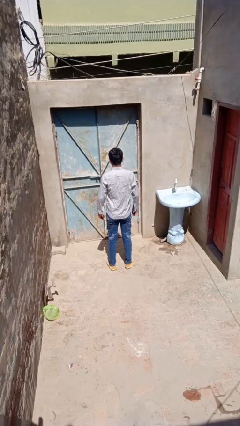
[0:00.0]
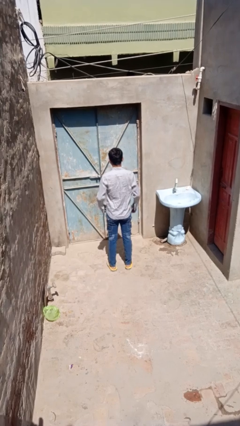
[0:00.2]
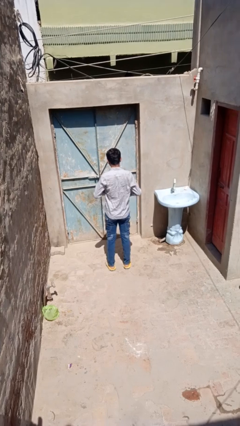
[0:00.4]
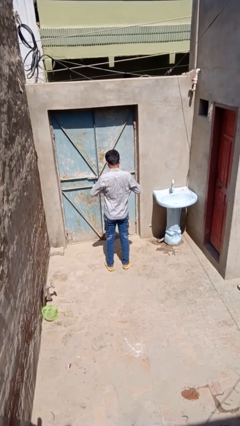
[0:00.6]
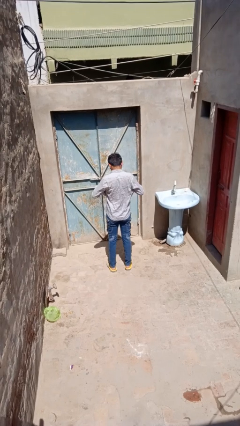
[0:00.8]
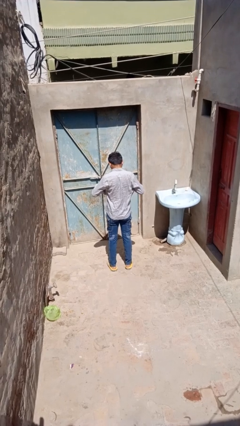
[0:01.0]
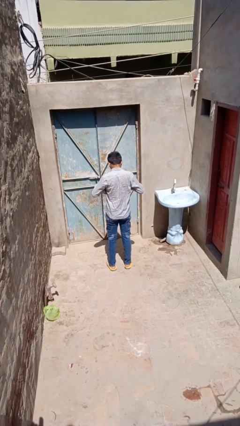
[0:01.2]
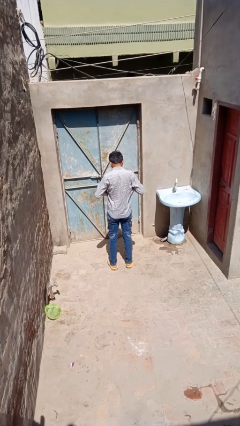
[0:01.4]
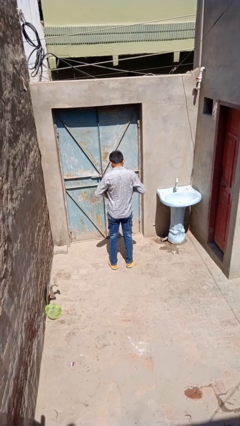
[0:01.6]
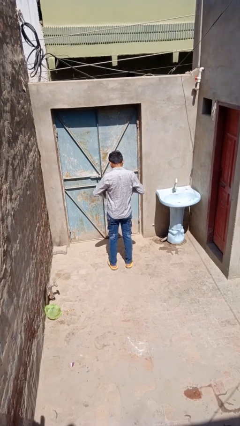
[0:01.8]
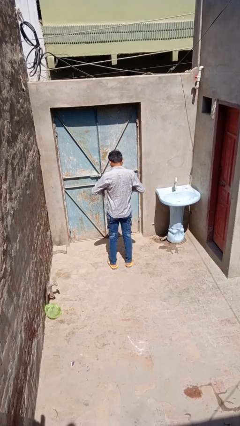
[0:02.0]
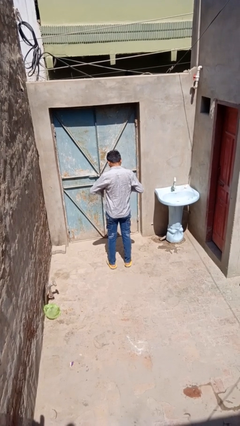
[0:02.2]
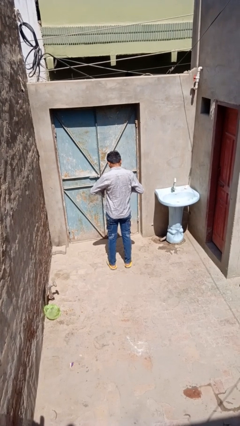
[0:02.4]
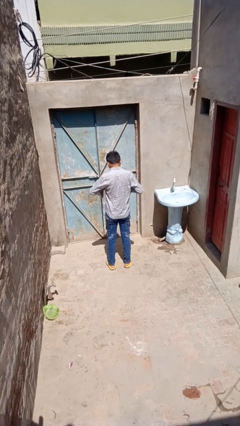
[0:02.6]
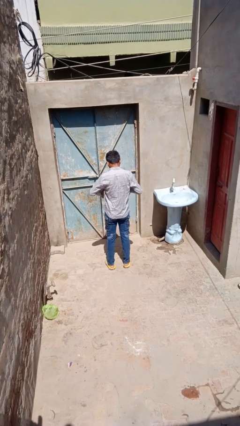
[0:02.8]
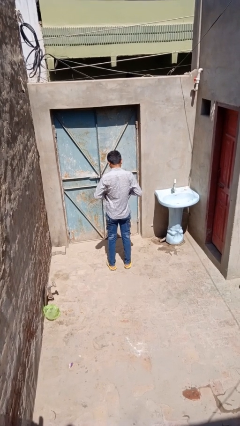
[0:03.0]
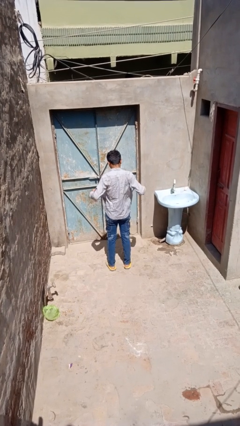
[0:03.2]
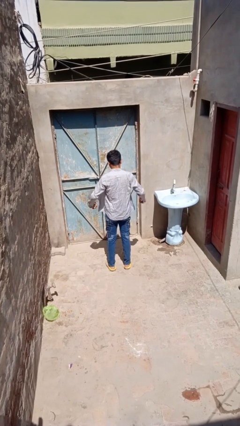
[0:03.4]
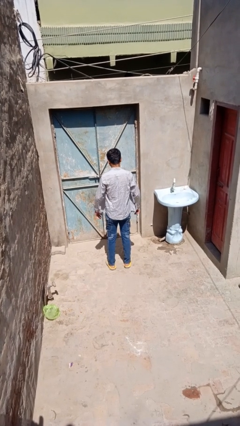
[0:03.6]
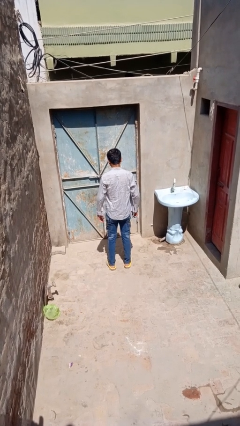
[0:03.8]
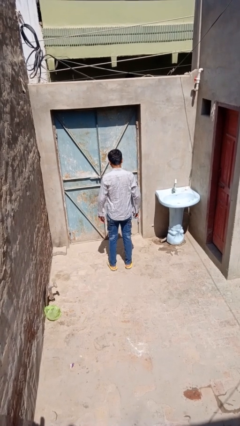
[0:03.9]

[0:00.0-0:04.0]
person unbuttons shirt

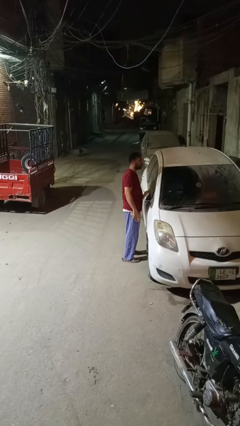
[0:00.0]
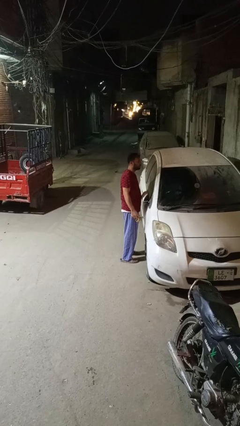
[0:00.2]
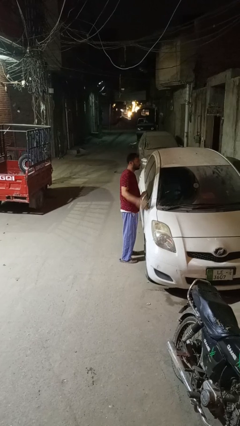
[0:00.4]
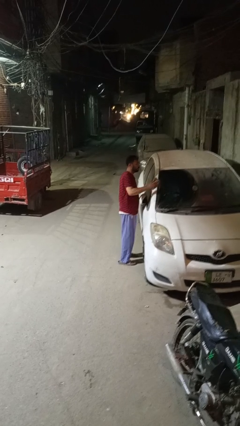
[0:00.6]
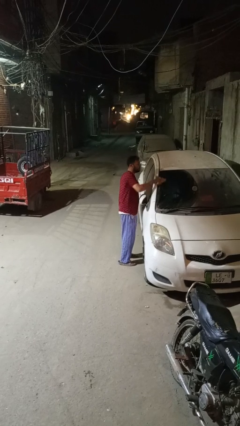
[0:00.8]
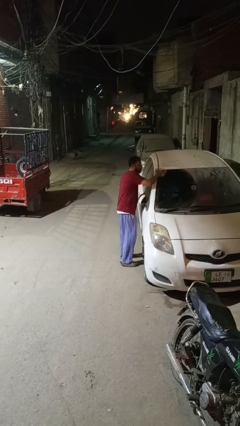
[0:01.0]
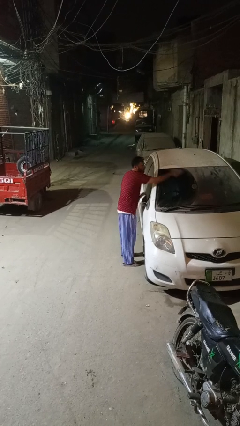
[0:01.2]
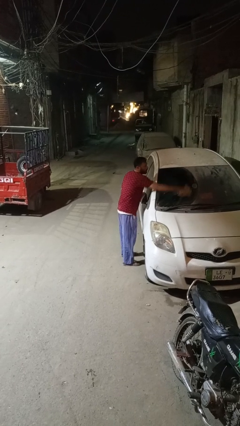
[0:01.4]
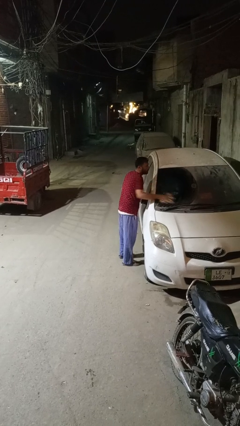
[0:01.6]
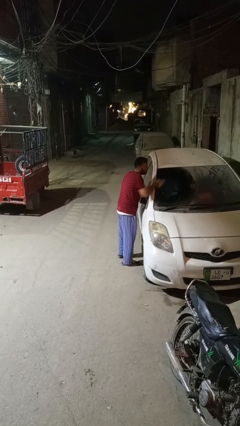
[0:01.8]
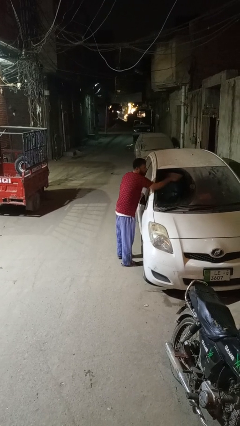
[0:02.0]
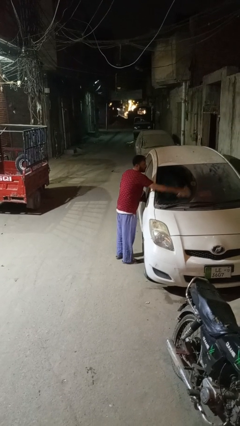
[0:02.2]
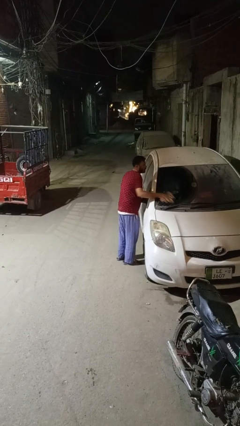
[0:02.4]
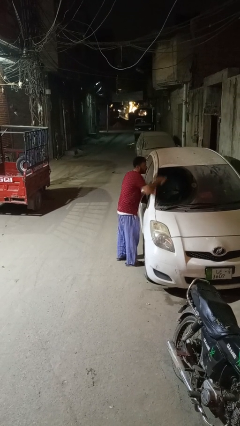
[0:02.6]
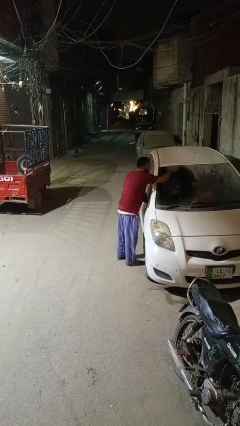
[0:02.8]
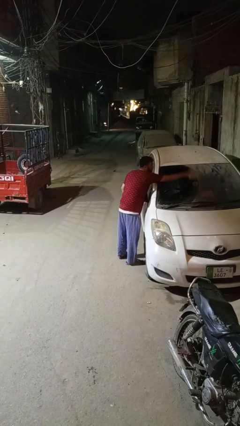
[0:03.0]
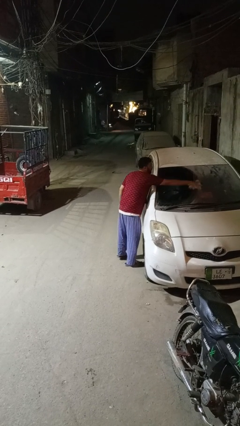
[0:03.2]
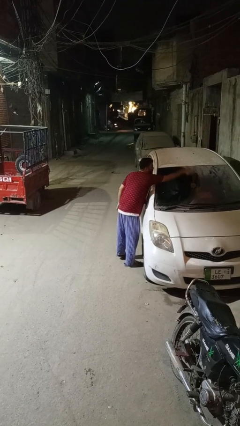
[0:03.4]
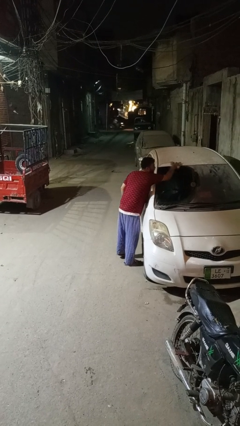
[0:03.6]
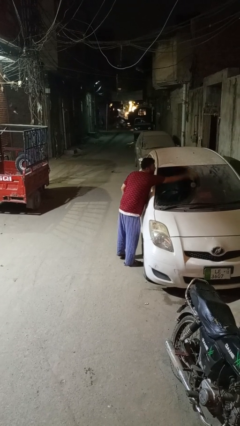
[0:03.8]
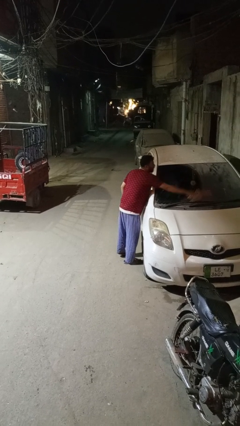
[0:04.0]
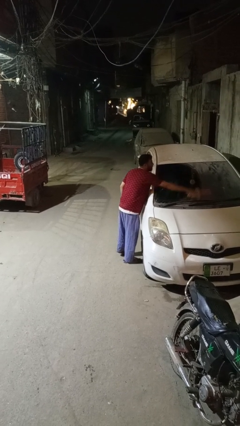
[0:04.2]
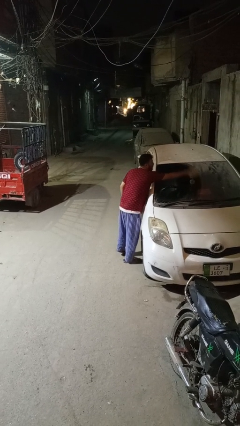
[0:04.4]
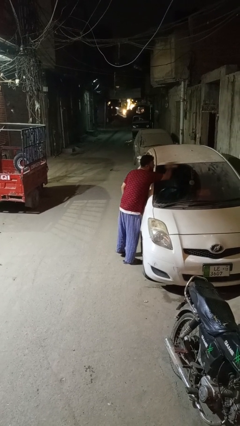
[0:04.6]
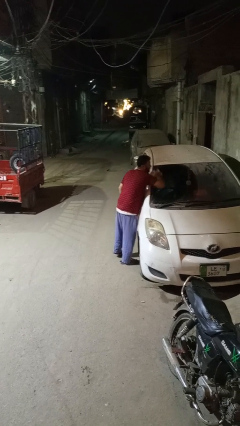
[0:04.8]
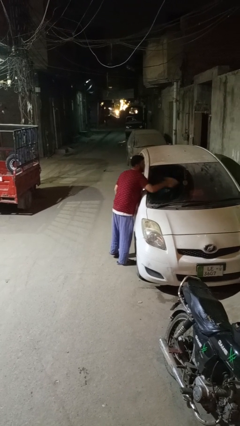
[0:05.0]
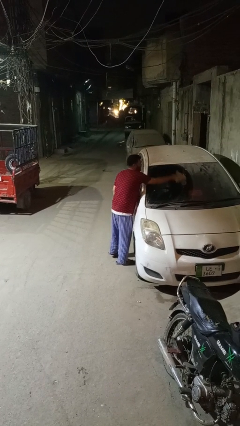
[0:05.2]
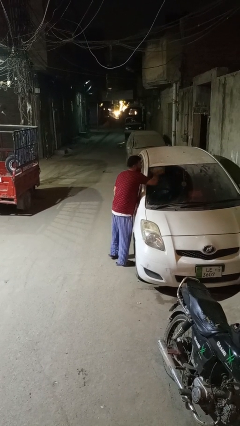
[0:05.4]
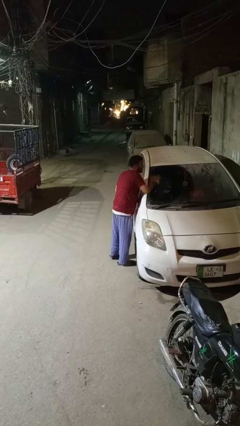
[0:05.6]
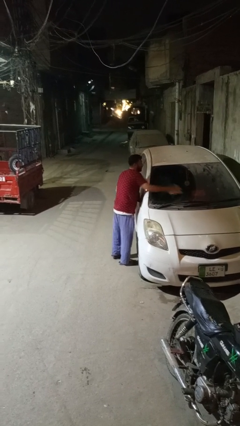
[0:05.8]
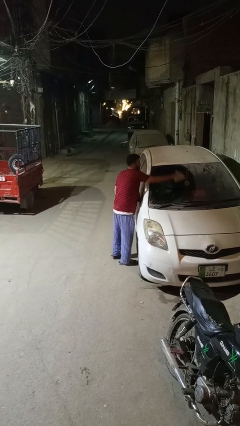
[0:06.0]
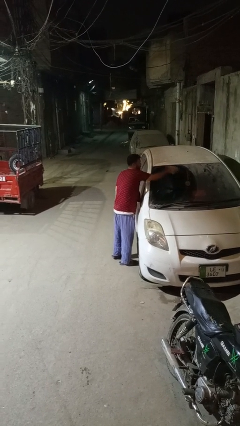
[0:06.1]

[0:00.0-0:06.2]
person polishes car with rag

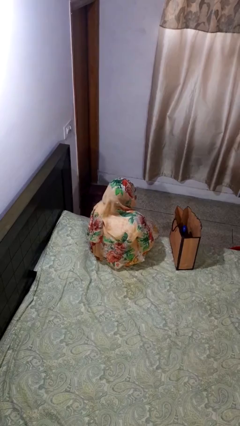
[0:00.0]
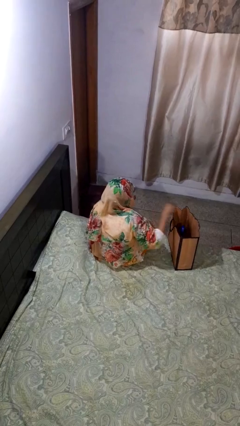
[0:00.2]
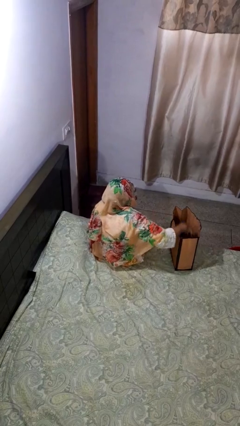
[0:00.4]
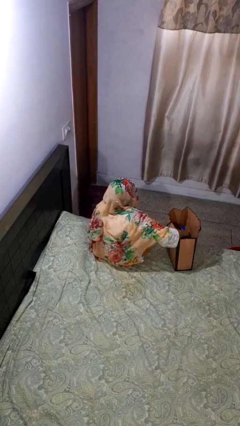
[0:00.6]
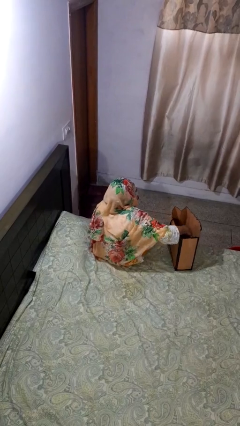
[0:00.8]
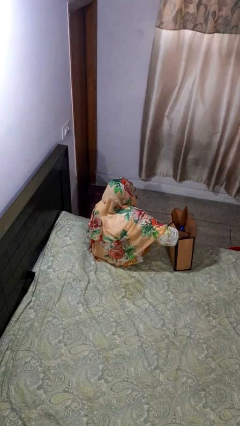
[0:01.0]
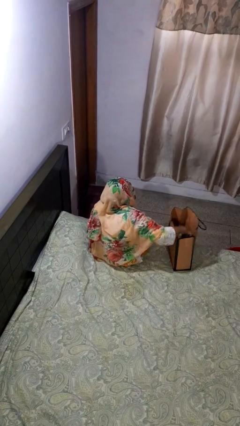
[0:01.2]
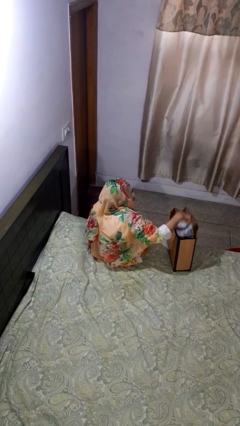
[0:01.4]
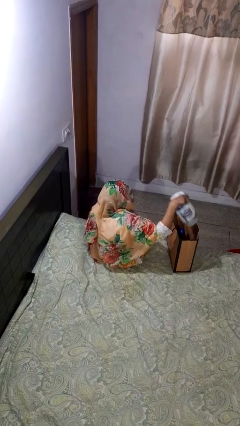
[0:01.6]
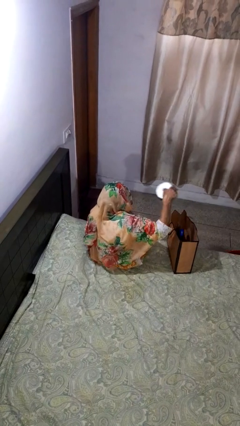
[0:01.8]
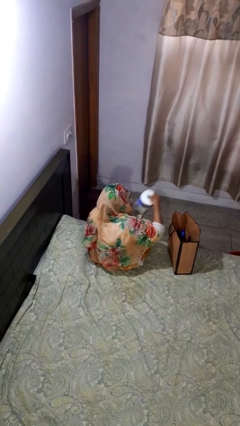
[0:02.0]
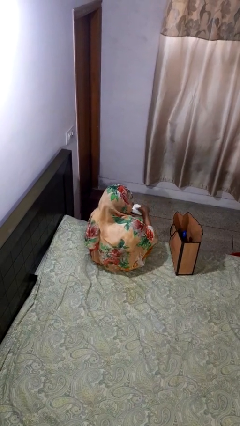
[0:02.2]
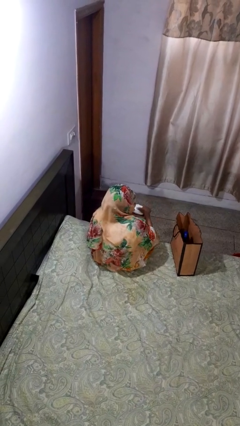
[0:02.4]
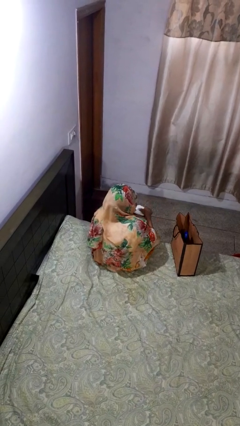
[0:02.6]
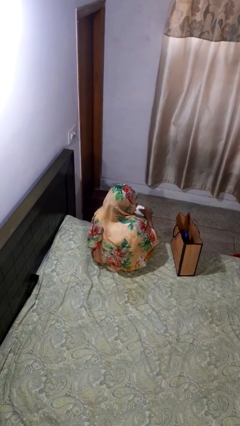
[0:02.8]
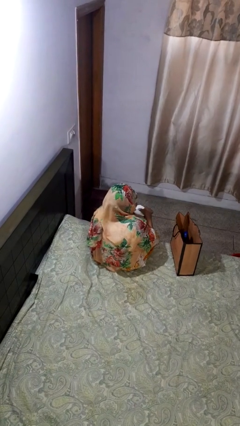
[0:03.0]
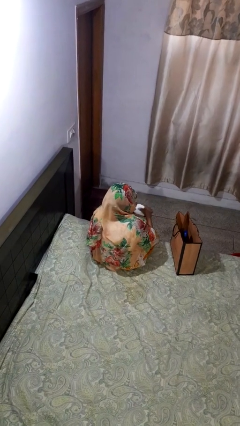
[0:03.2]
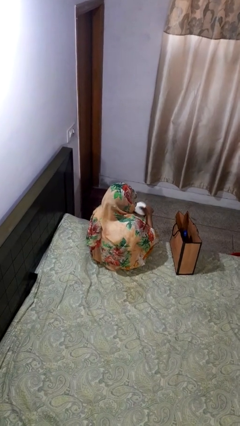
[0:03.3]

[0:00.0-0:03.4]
person takes object from bag

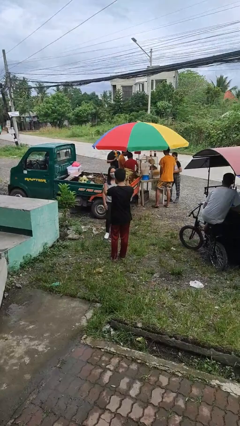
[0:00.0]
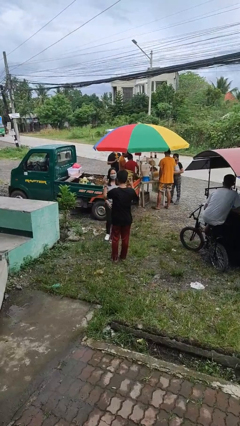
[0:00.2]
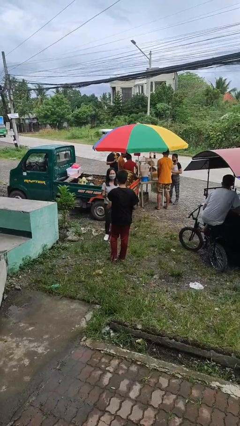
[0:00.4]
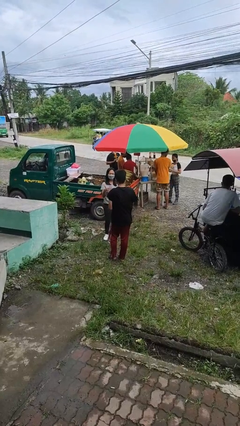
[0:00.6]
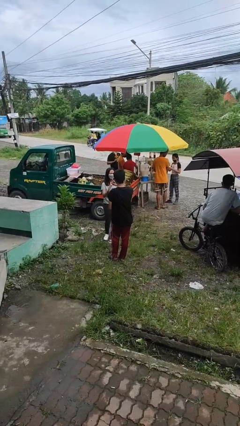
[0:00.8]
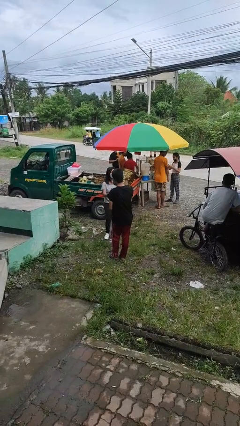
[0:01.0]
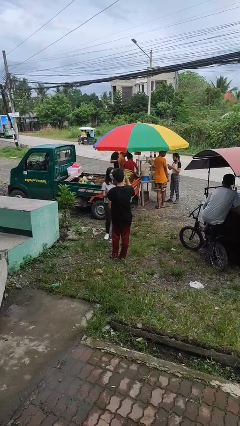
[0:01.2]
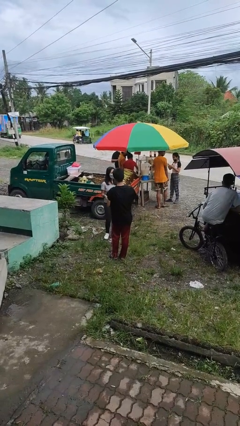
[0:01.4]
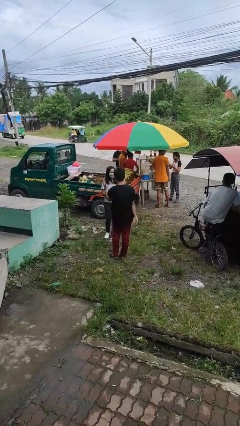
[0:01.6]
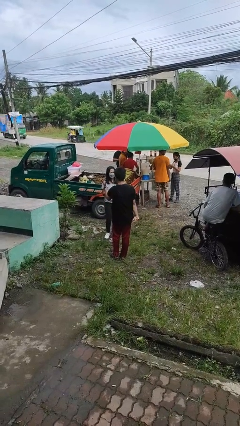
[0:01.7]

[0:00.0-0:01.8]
person talks to person

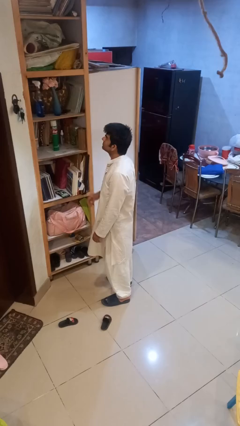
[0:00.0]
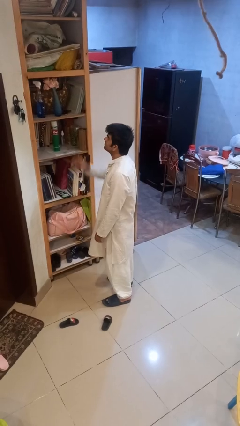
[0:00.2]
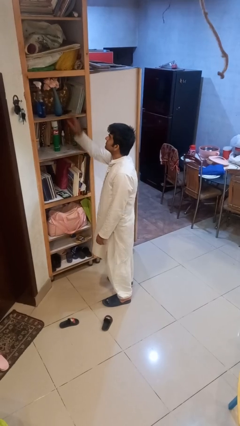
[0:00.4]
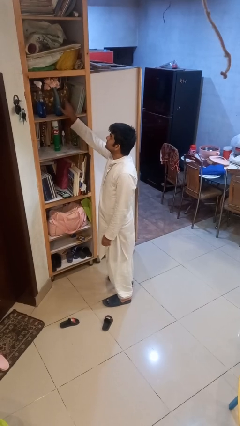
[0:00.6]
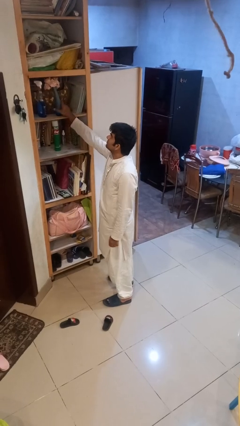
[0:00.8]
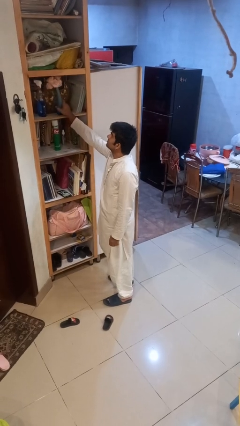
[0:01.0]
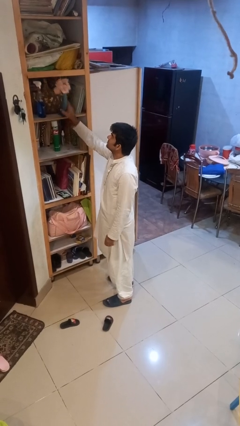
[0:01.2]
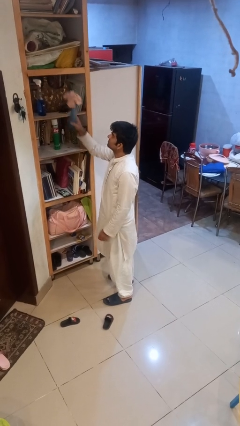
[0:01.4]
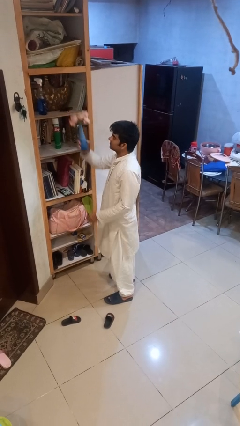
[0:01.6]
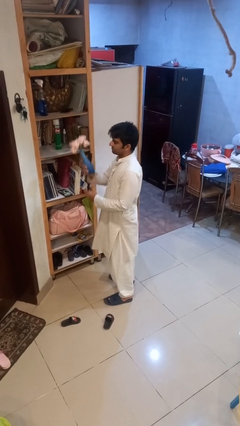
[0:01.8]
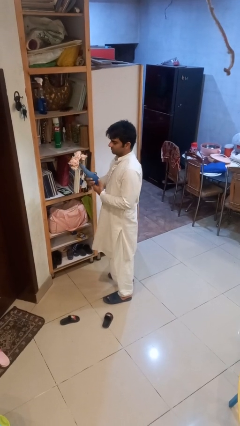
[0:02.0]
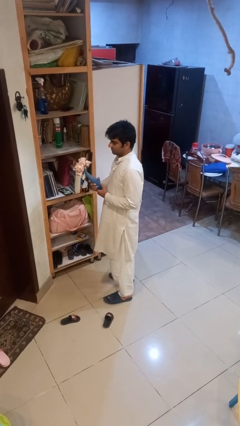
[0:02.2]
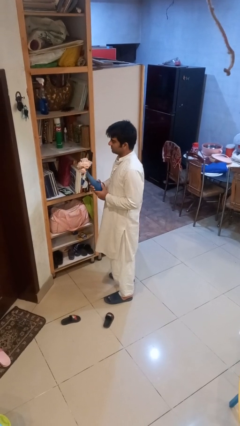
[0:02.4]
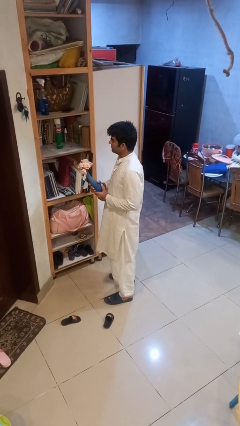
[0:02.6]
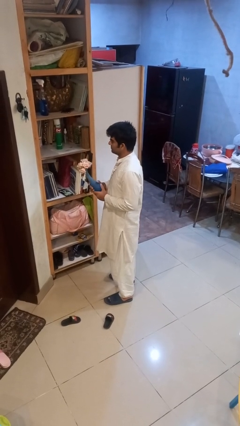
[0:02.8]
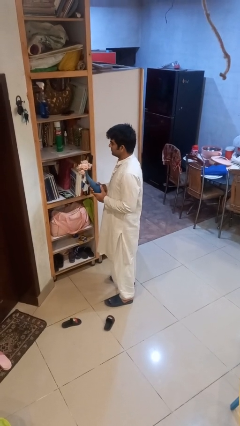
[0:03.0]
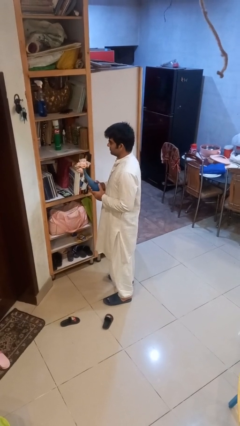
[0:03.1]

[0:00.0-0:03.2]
person picks up object from shelf
